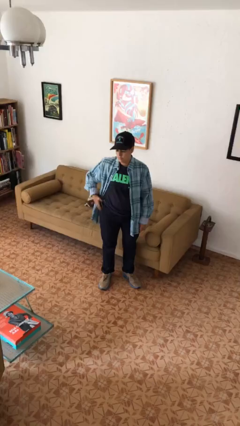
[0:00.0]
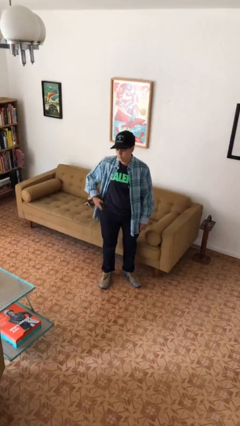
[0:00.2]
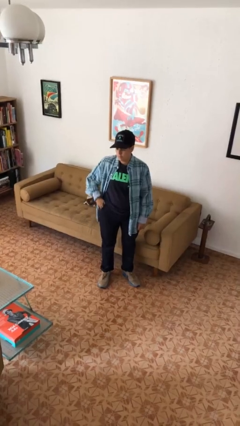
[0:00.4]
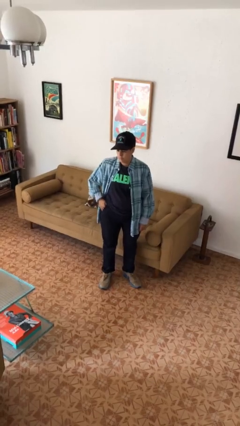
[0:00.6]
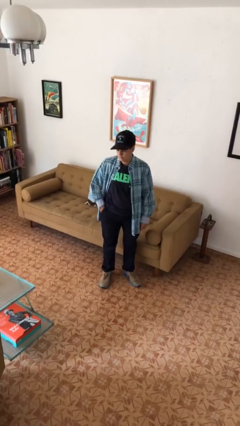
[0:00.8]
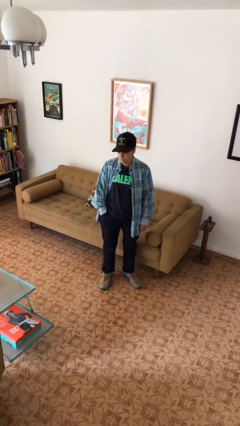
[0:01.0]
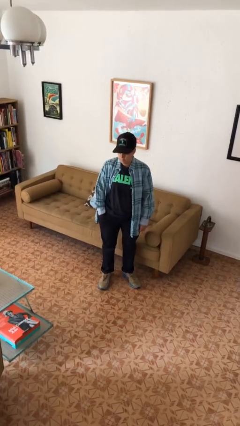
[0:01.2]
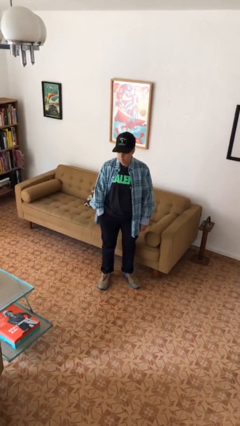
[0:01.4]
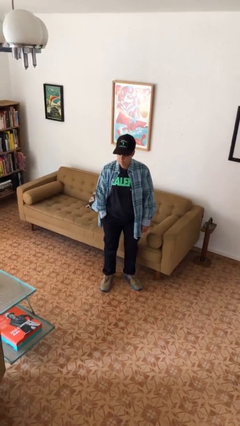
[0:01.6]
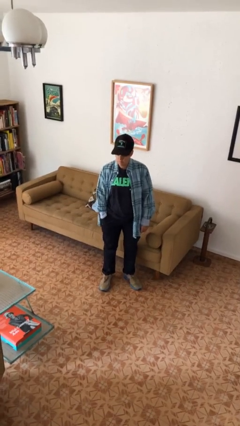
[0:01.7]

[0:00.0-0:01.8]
person puts phone into pocket

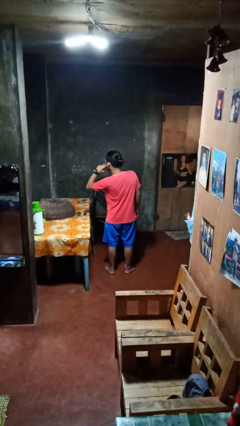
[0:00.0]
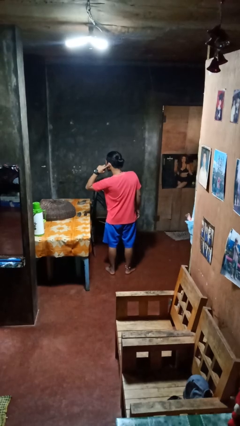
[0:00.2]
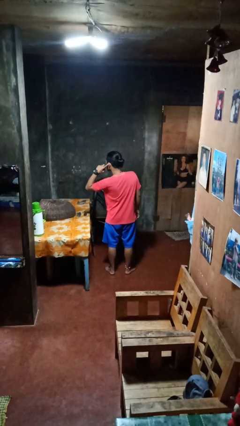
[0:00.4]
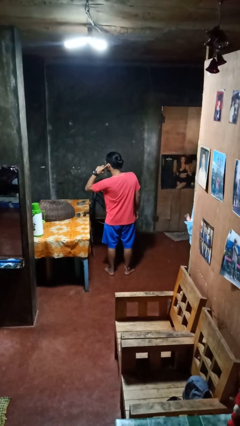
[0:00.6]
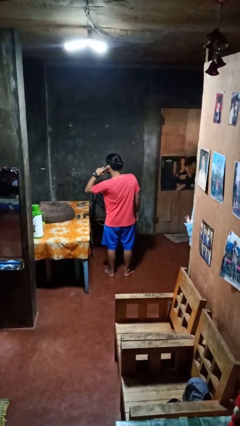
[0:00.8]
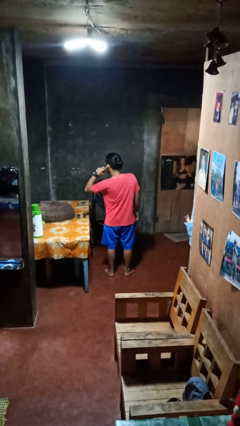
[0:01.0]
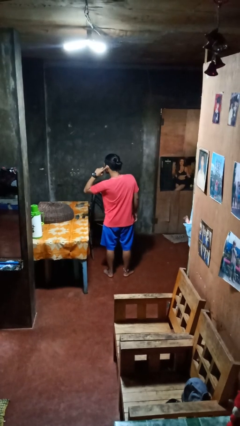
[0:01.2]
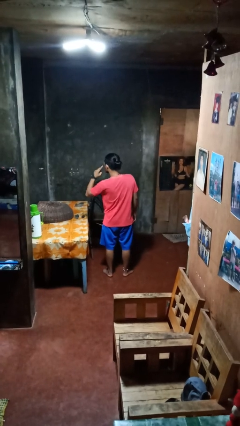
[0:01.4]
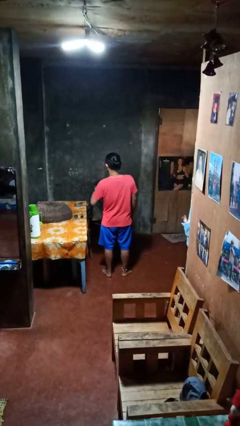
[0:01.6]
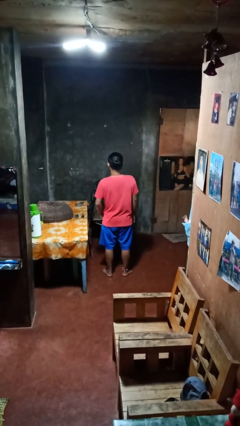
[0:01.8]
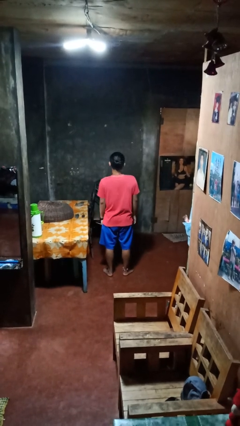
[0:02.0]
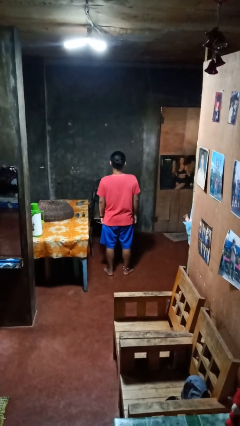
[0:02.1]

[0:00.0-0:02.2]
person gestures listen closely

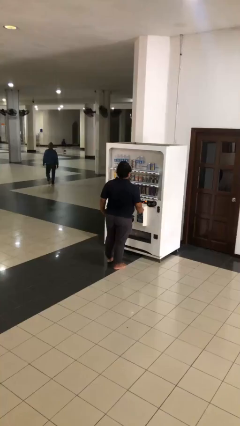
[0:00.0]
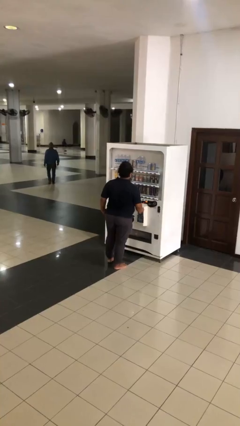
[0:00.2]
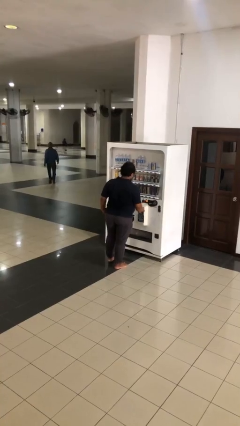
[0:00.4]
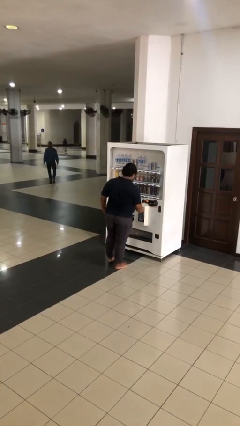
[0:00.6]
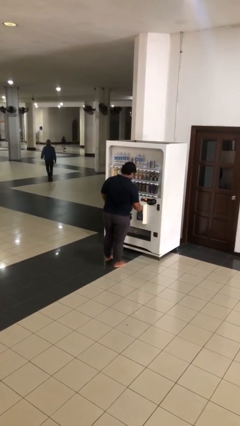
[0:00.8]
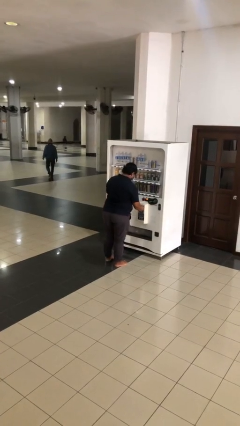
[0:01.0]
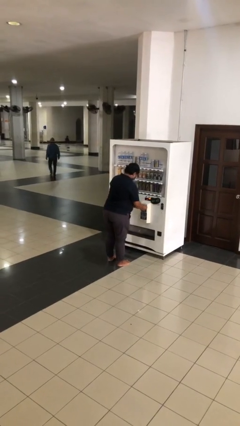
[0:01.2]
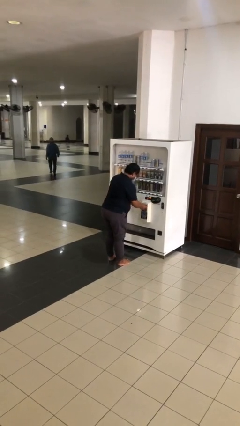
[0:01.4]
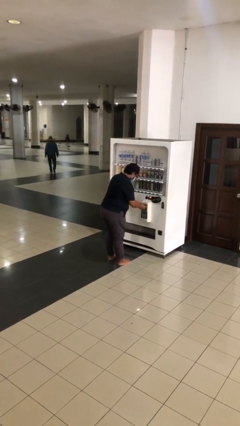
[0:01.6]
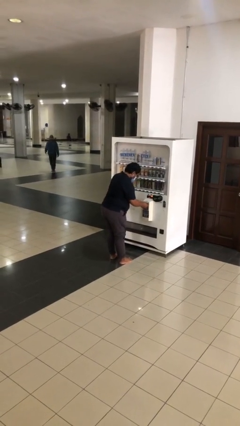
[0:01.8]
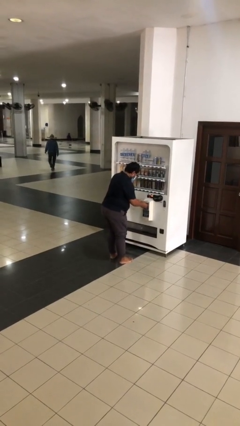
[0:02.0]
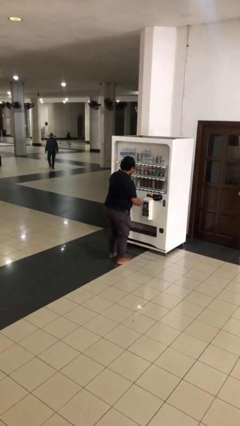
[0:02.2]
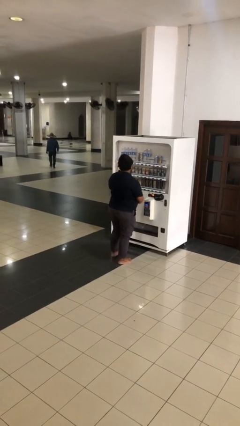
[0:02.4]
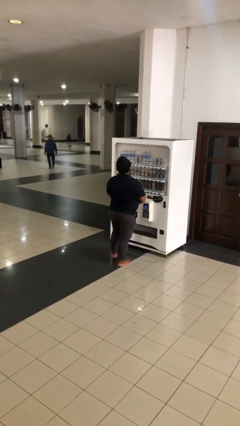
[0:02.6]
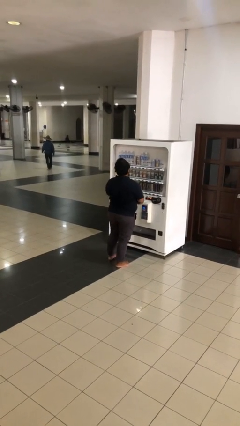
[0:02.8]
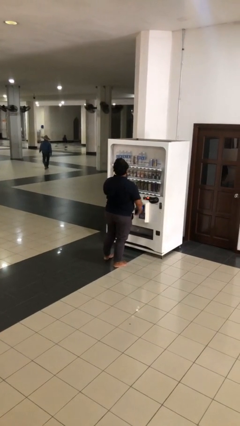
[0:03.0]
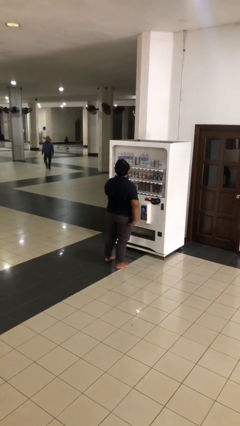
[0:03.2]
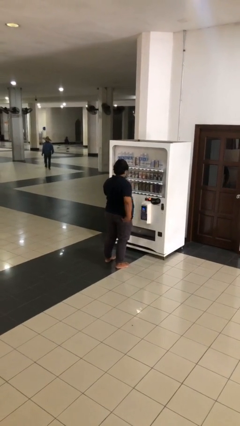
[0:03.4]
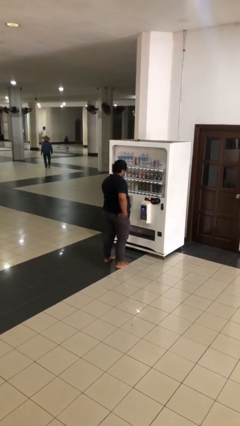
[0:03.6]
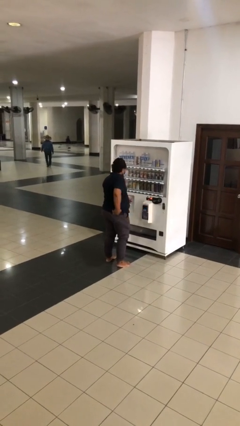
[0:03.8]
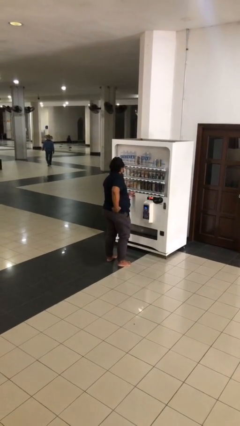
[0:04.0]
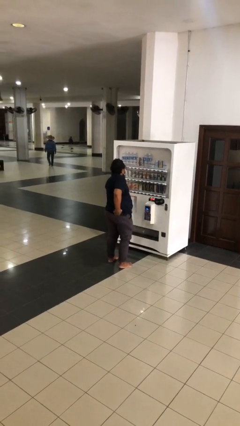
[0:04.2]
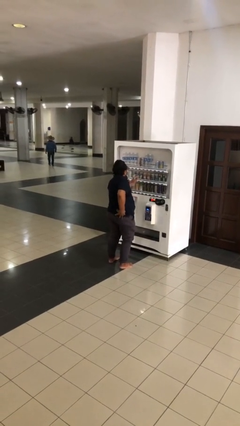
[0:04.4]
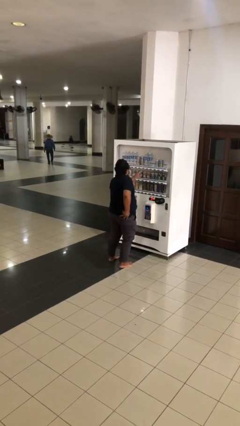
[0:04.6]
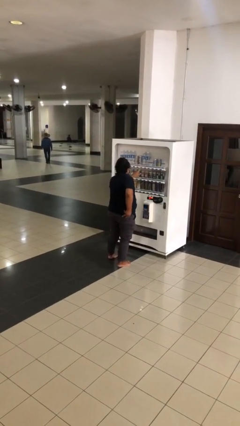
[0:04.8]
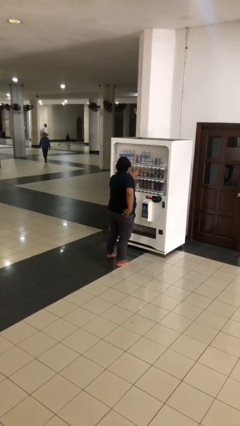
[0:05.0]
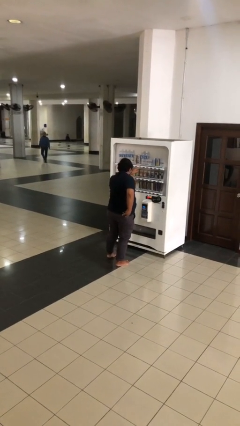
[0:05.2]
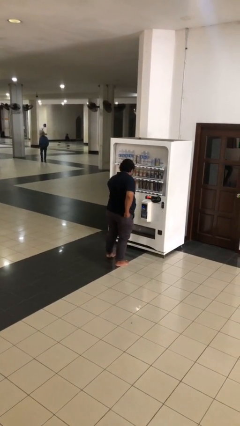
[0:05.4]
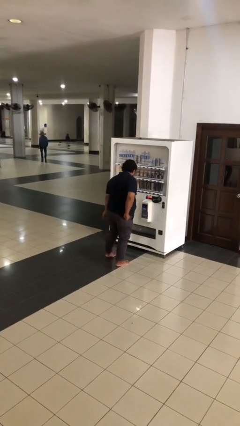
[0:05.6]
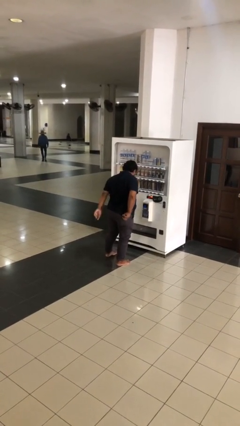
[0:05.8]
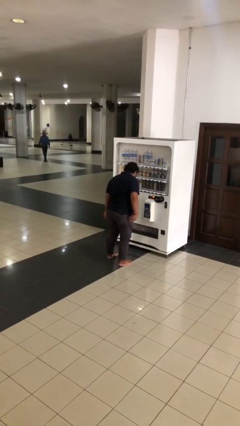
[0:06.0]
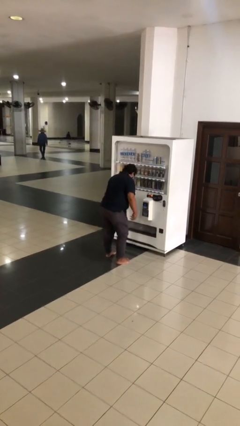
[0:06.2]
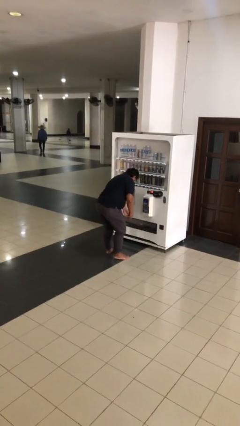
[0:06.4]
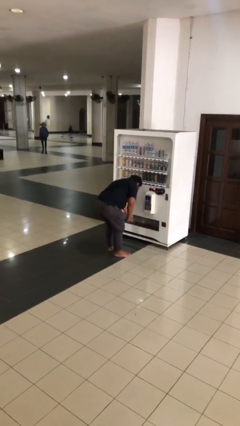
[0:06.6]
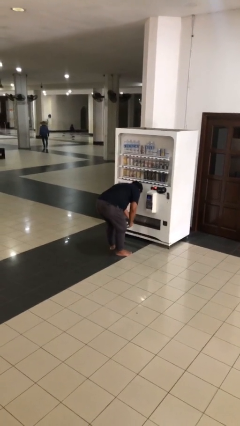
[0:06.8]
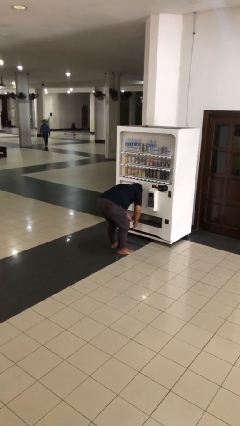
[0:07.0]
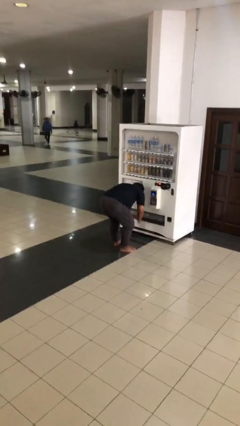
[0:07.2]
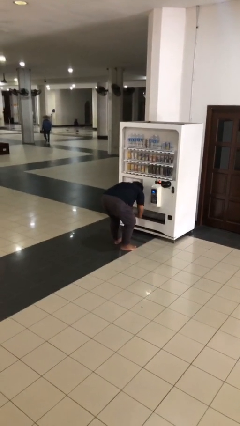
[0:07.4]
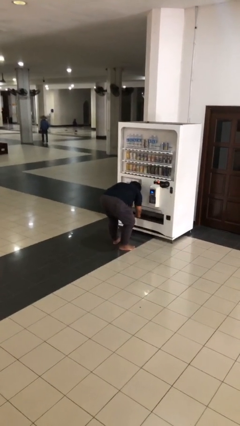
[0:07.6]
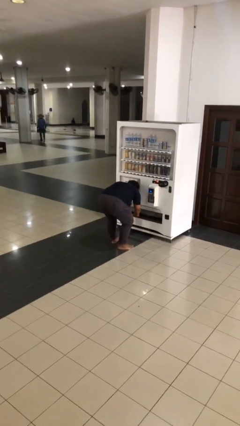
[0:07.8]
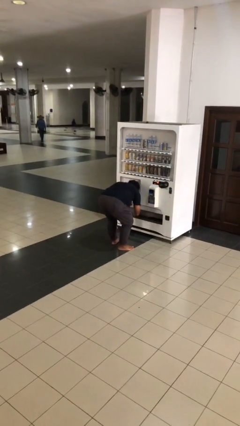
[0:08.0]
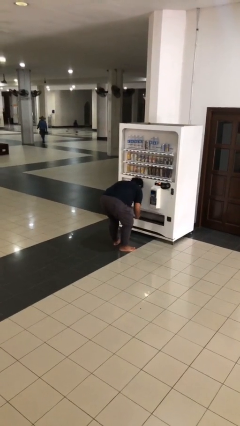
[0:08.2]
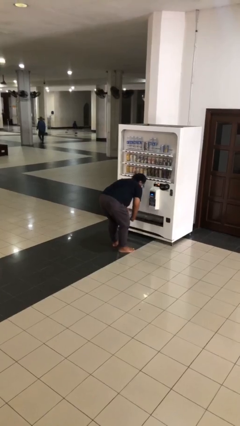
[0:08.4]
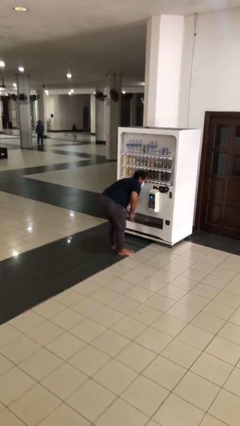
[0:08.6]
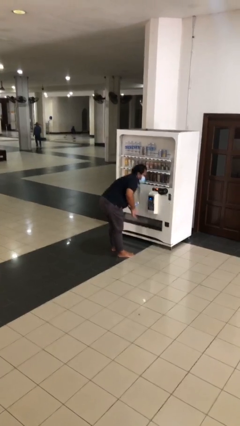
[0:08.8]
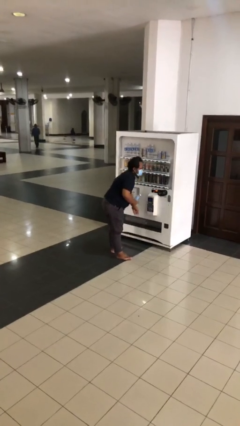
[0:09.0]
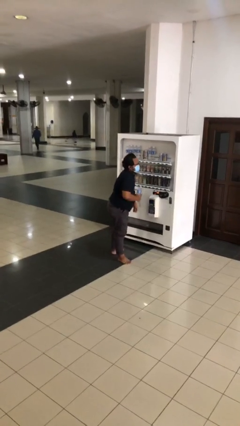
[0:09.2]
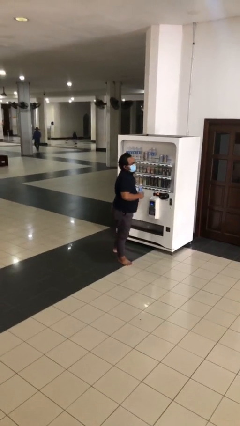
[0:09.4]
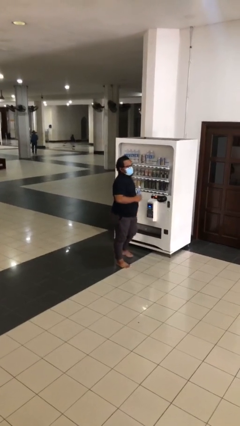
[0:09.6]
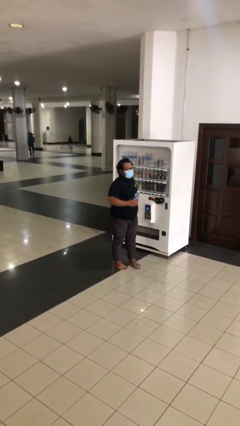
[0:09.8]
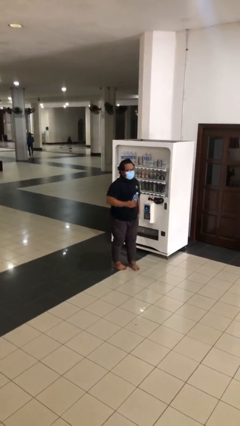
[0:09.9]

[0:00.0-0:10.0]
person purchases from machine

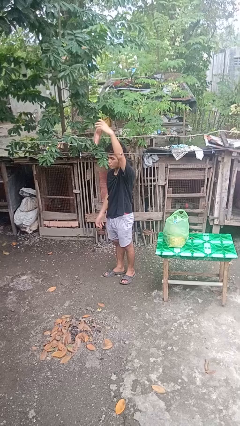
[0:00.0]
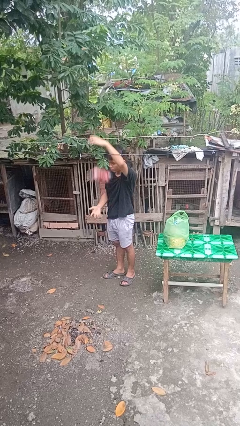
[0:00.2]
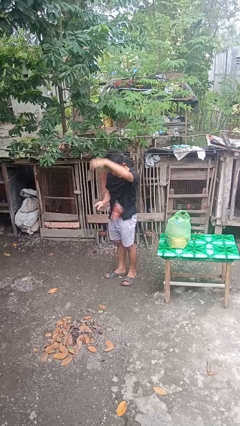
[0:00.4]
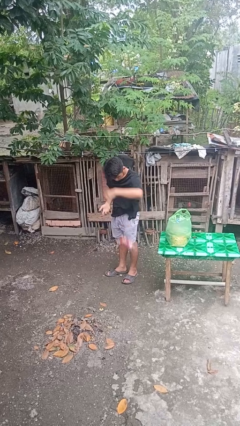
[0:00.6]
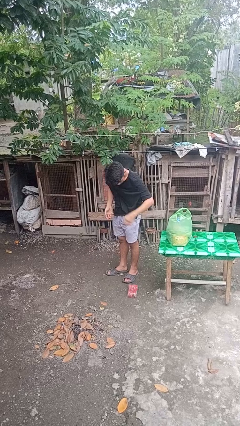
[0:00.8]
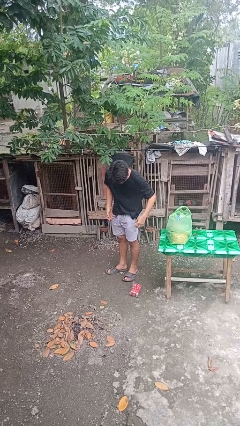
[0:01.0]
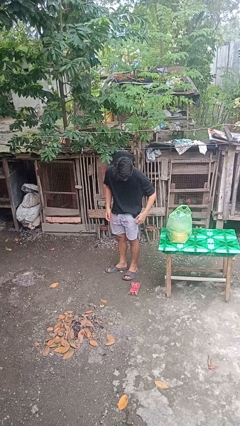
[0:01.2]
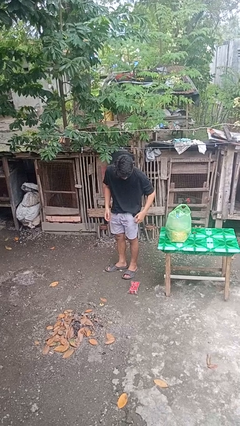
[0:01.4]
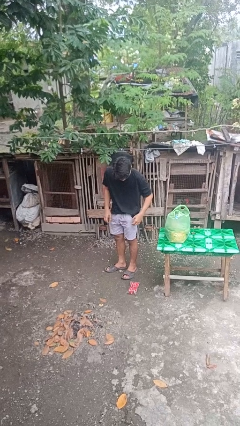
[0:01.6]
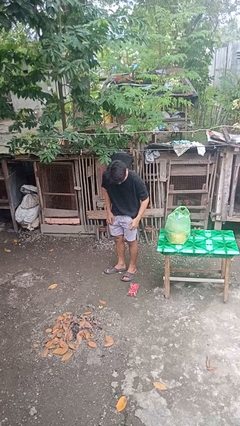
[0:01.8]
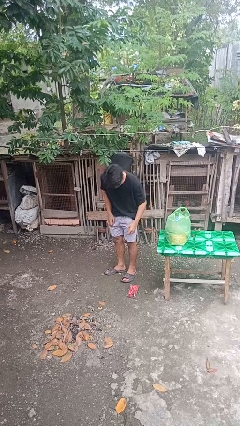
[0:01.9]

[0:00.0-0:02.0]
person drops object

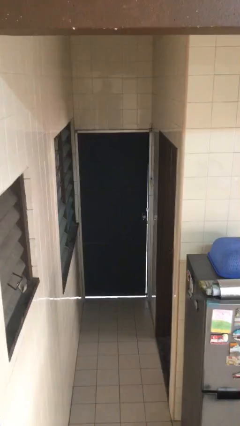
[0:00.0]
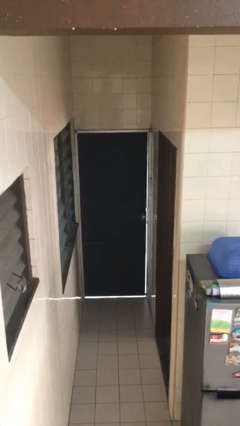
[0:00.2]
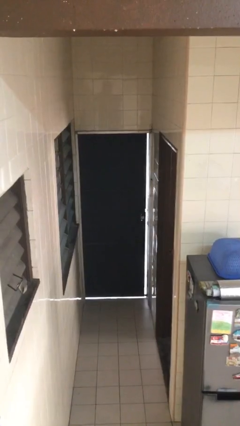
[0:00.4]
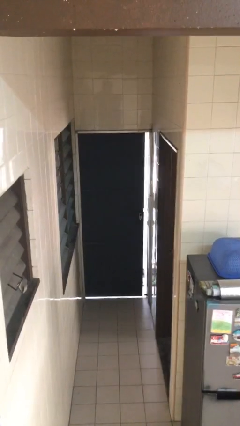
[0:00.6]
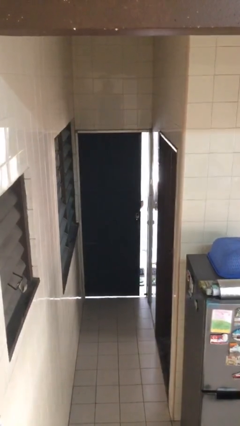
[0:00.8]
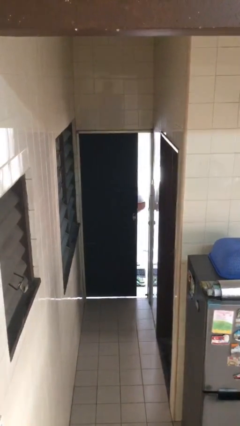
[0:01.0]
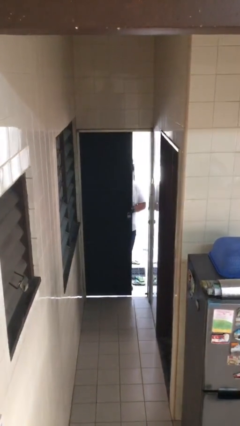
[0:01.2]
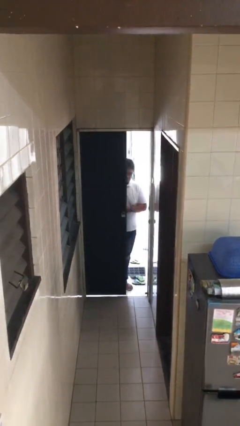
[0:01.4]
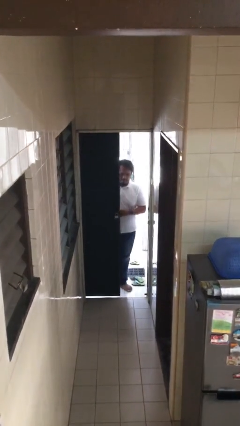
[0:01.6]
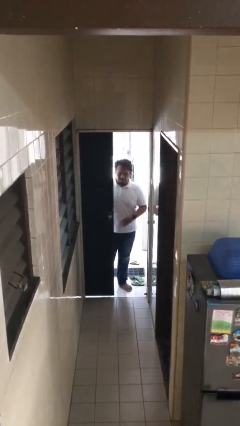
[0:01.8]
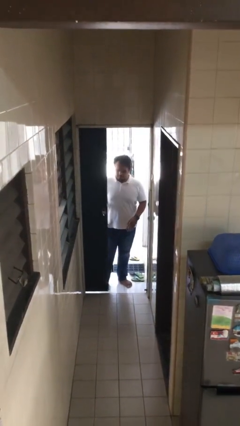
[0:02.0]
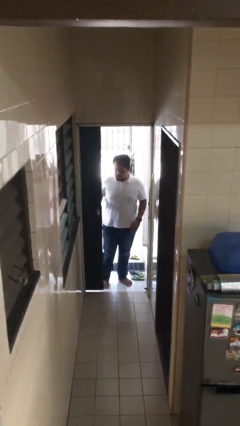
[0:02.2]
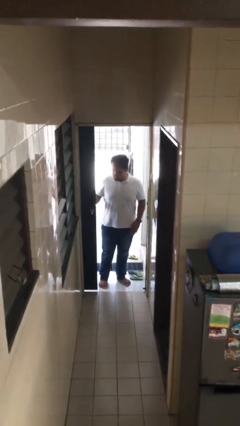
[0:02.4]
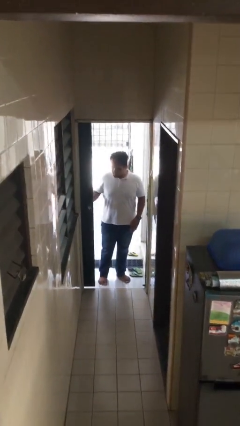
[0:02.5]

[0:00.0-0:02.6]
person opens facility door
